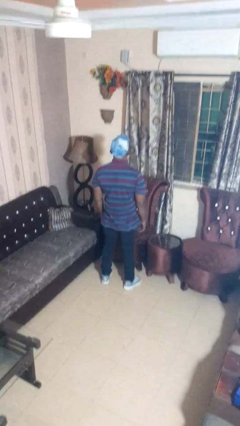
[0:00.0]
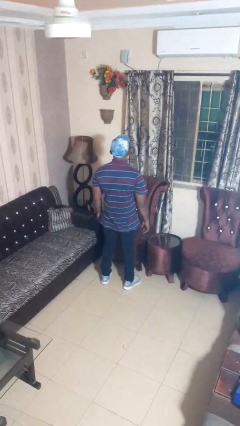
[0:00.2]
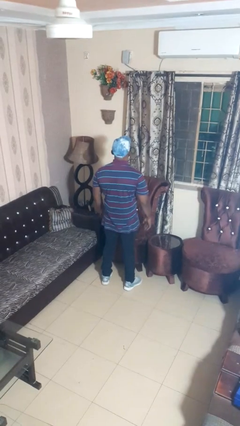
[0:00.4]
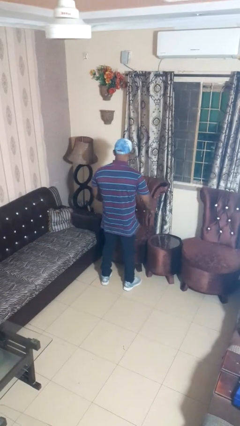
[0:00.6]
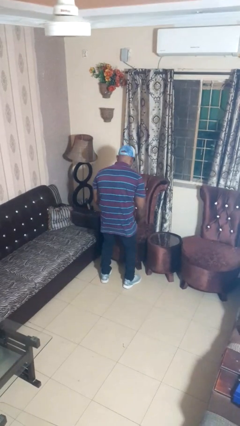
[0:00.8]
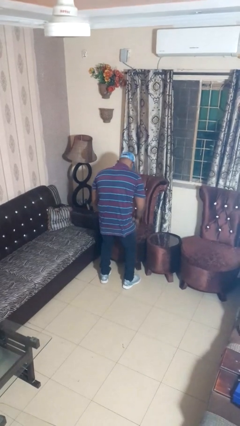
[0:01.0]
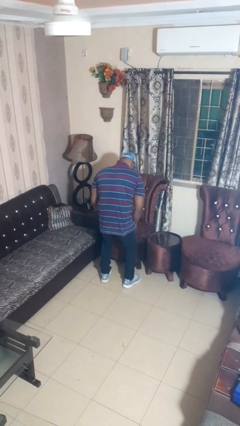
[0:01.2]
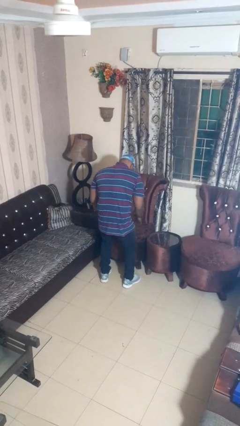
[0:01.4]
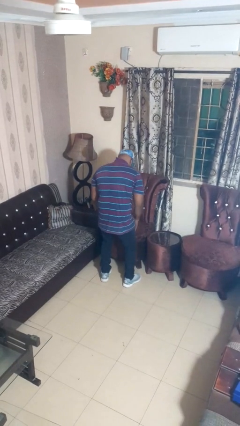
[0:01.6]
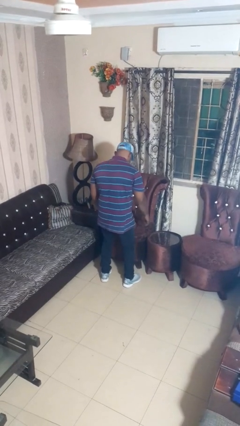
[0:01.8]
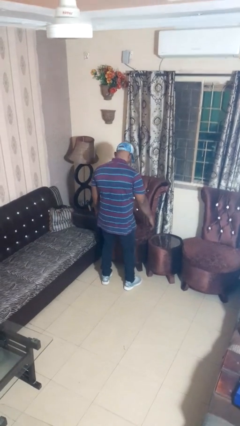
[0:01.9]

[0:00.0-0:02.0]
person slaps hands on thighs

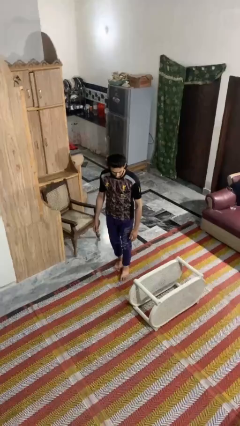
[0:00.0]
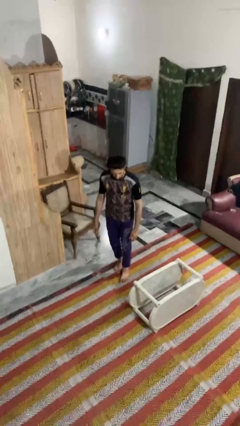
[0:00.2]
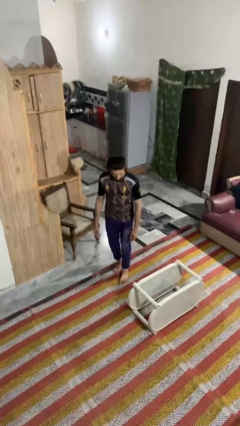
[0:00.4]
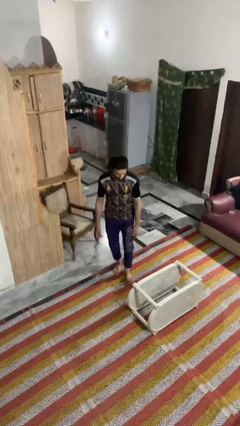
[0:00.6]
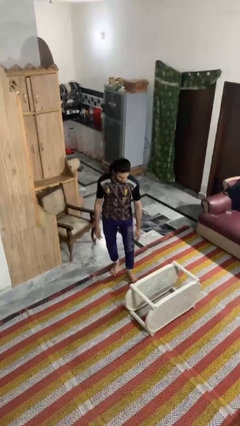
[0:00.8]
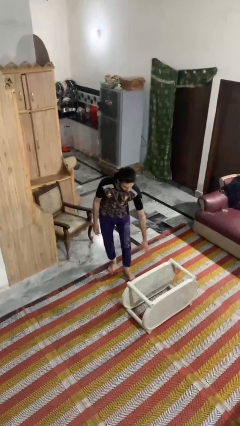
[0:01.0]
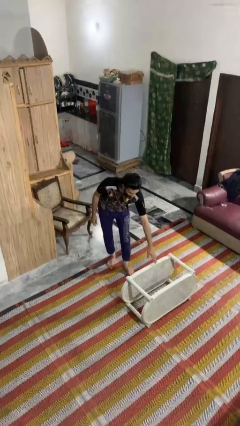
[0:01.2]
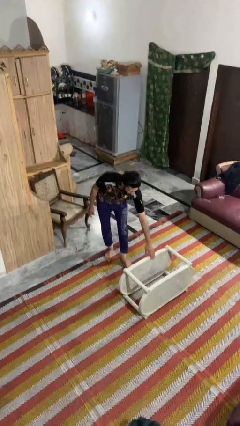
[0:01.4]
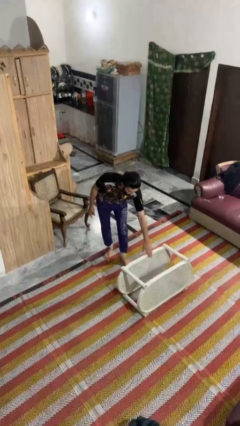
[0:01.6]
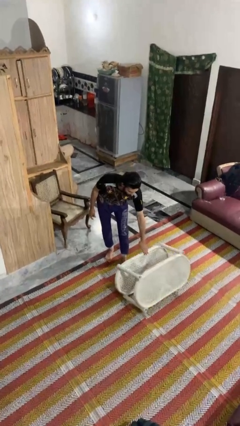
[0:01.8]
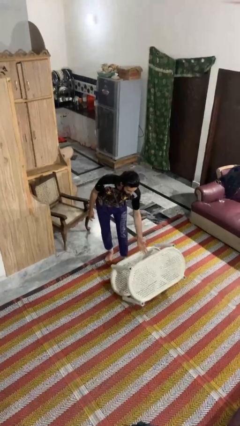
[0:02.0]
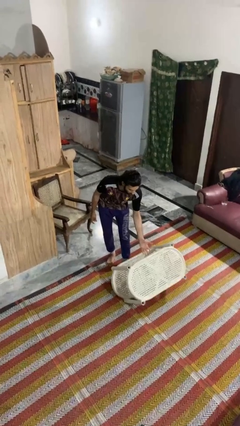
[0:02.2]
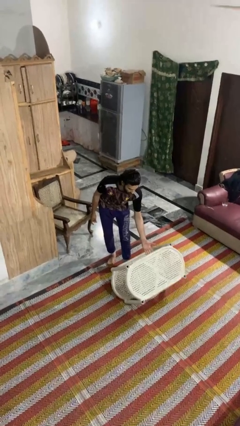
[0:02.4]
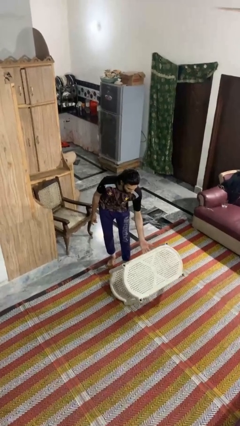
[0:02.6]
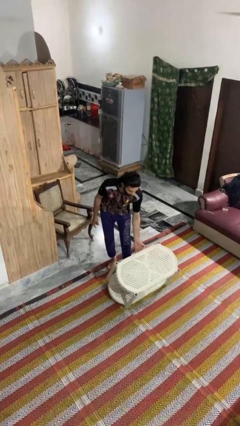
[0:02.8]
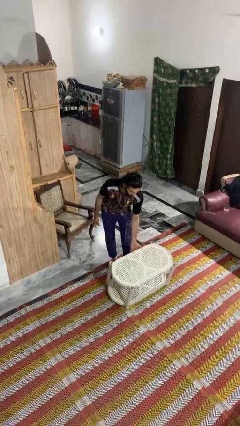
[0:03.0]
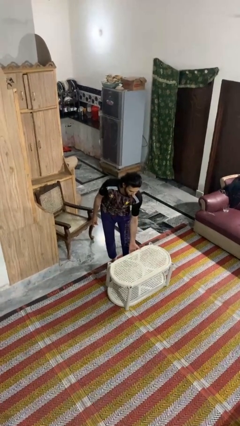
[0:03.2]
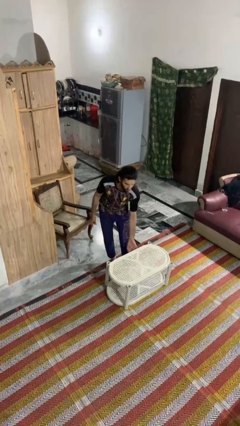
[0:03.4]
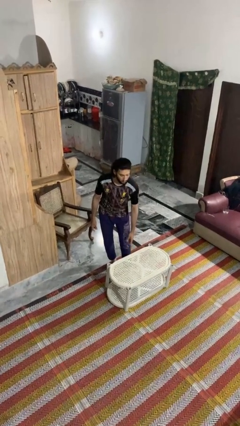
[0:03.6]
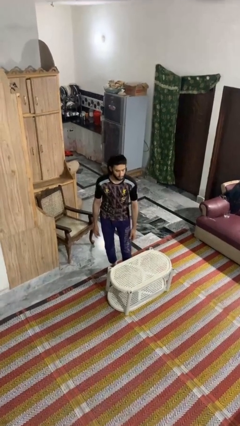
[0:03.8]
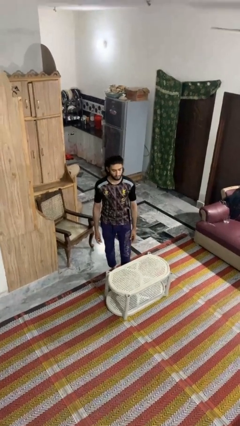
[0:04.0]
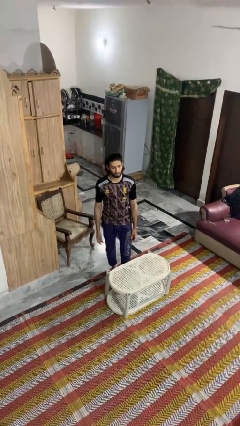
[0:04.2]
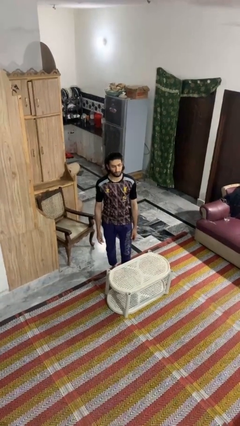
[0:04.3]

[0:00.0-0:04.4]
person sets upright furniture

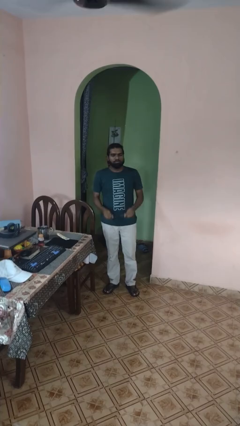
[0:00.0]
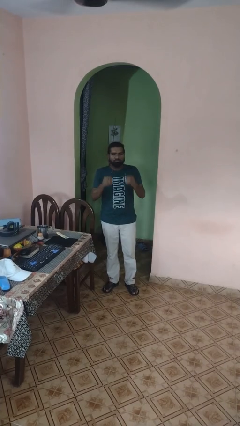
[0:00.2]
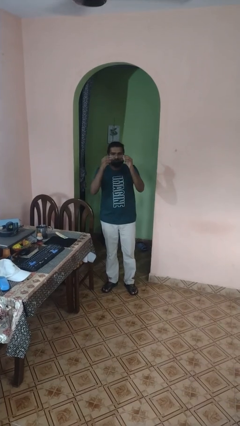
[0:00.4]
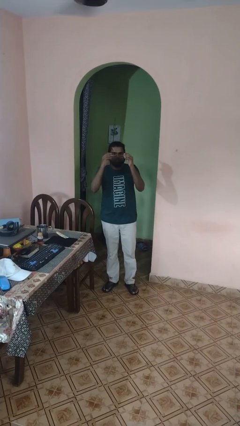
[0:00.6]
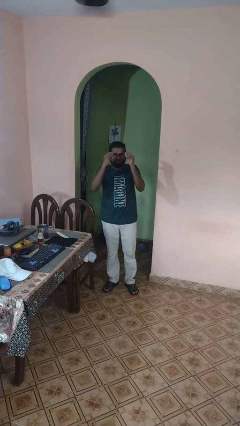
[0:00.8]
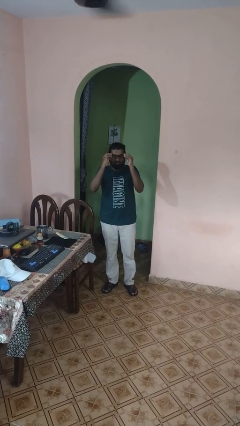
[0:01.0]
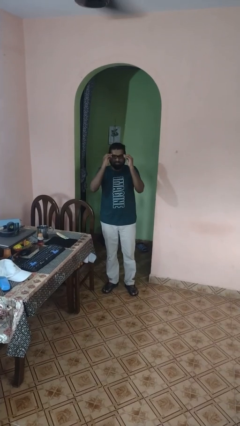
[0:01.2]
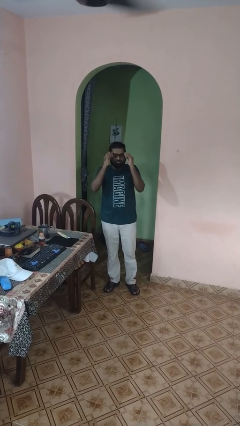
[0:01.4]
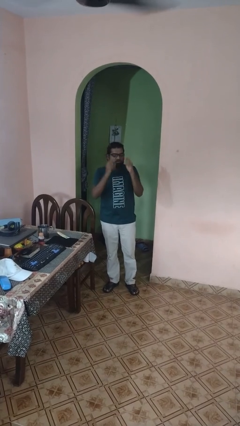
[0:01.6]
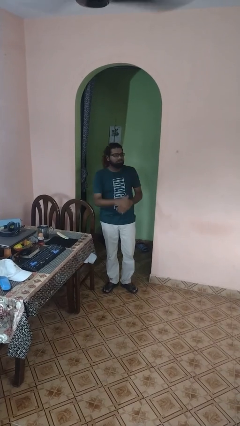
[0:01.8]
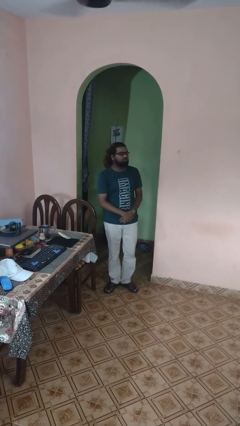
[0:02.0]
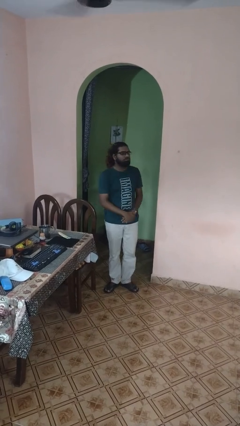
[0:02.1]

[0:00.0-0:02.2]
person puts on glasses

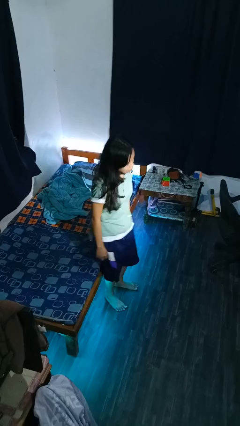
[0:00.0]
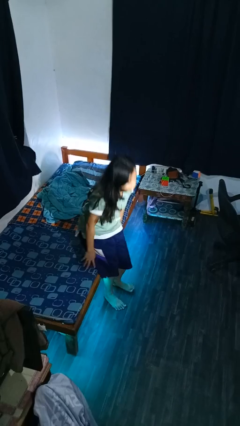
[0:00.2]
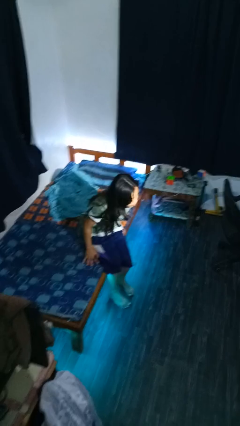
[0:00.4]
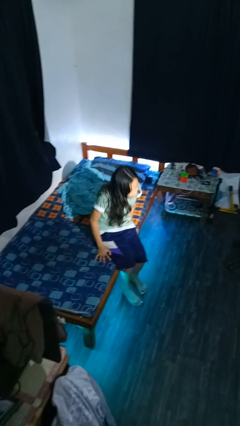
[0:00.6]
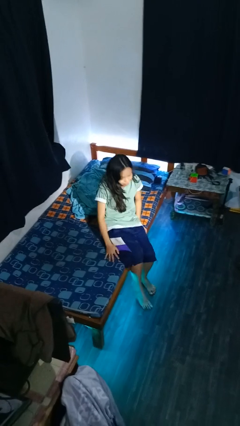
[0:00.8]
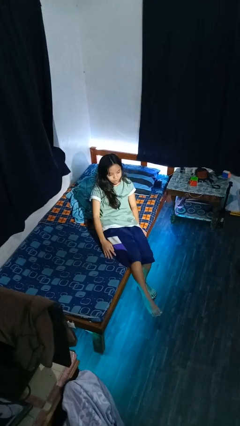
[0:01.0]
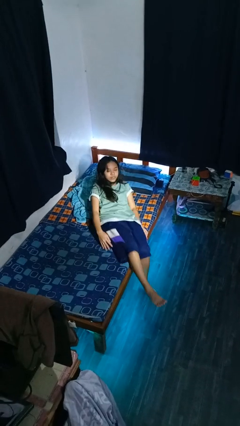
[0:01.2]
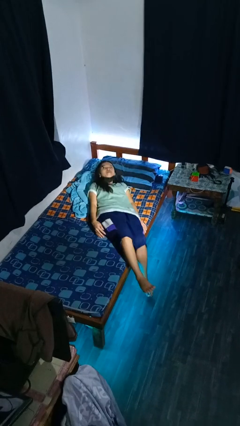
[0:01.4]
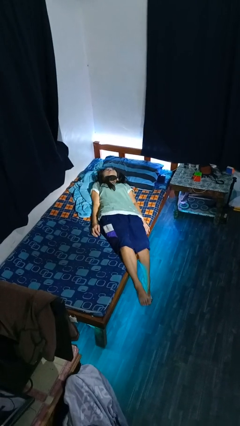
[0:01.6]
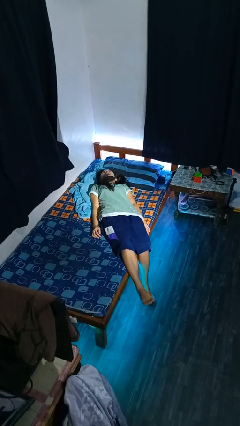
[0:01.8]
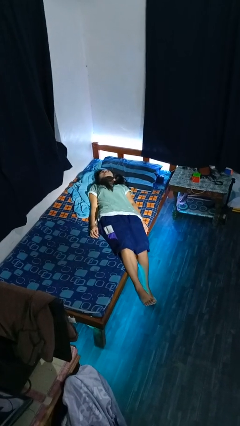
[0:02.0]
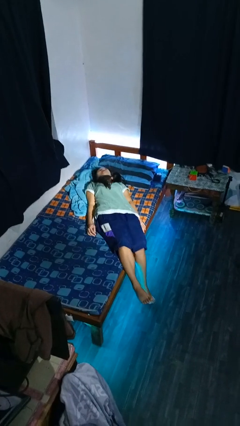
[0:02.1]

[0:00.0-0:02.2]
person lies down on bed

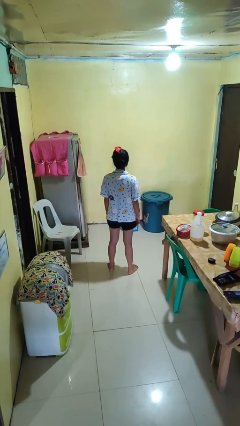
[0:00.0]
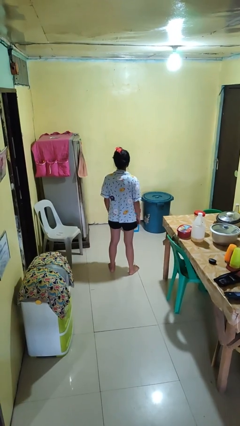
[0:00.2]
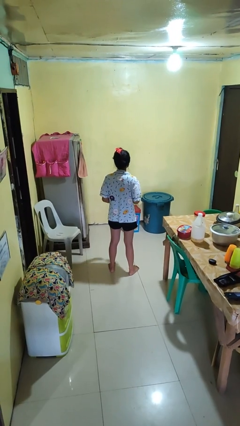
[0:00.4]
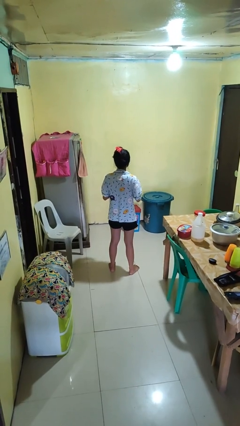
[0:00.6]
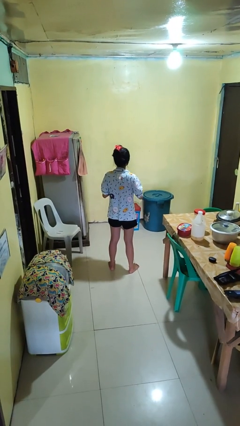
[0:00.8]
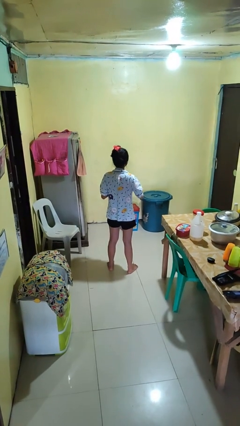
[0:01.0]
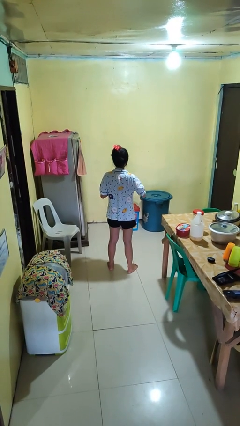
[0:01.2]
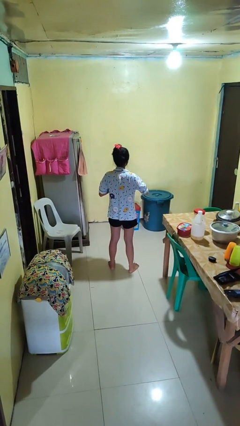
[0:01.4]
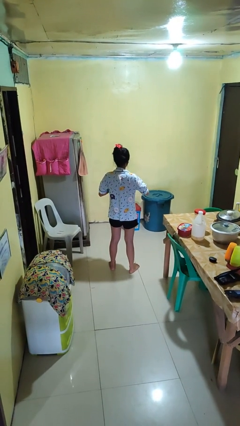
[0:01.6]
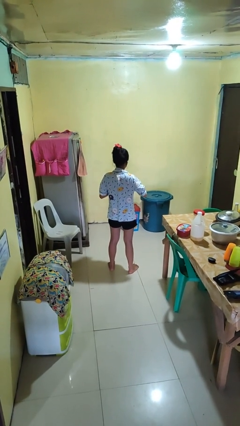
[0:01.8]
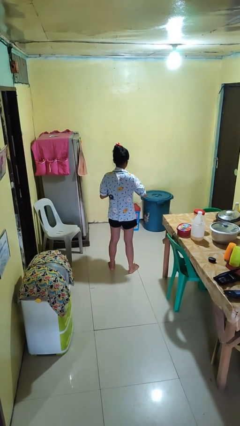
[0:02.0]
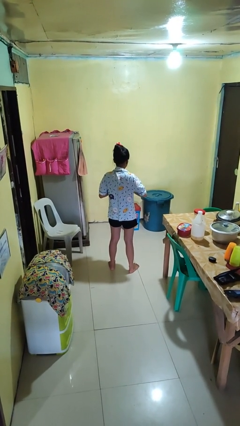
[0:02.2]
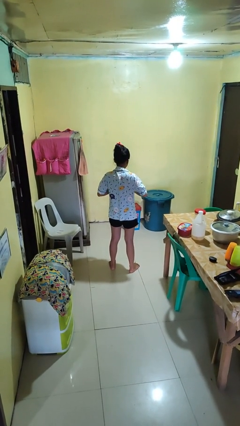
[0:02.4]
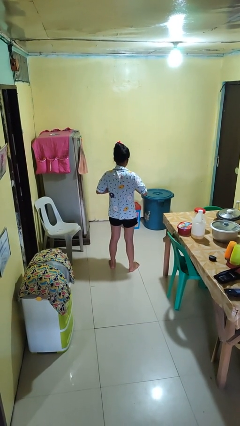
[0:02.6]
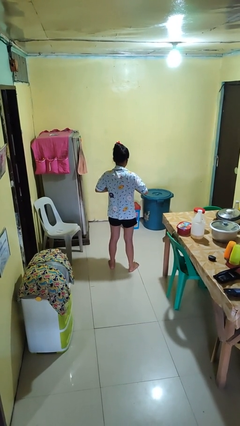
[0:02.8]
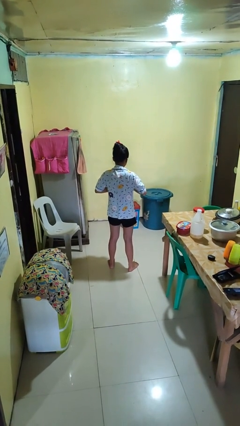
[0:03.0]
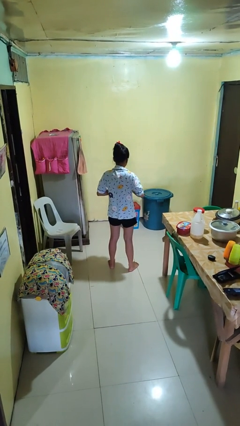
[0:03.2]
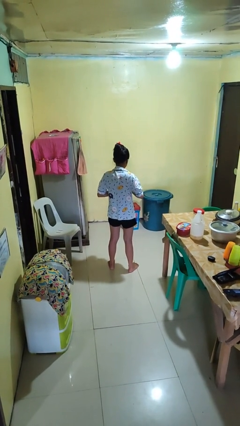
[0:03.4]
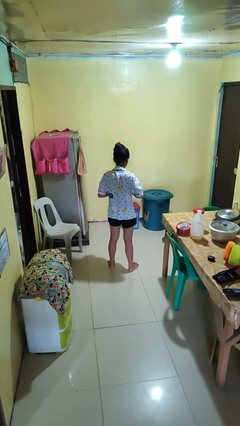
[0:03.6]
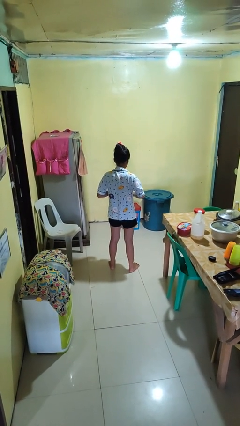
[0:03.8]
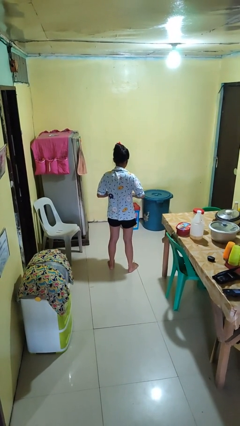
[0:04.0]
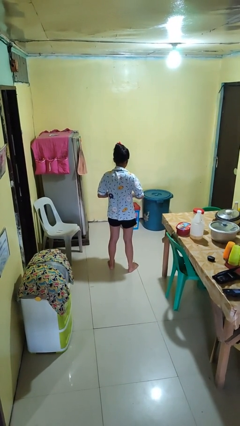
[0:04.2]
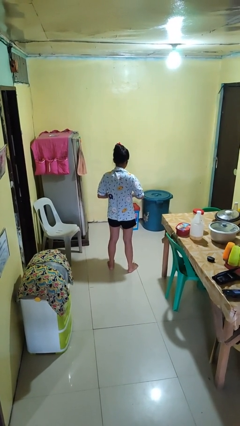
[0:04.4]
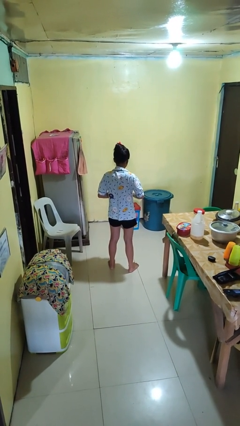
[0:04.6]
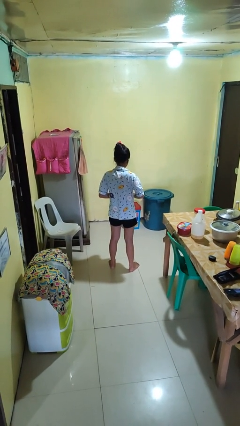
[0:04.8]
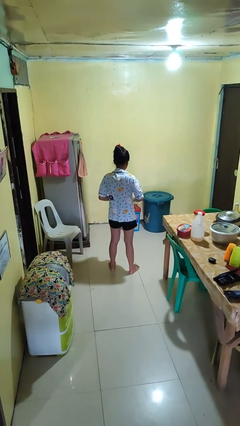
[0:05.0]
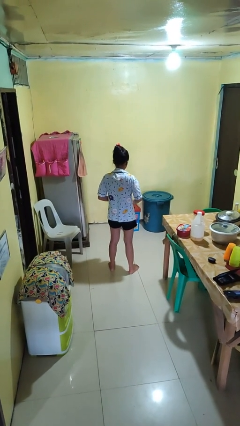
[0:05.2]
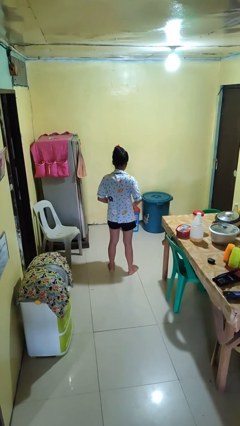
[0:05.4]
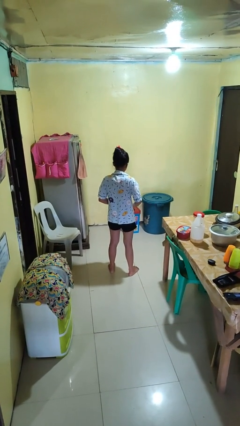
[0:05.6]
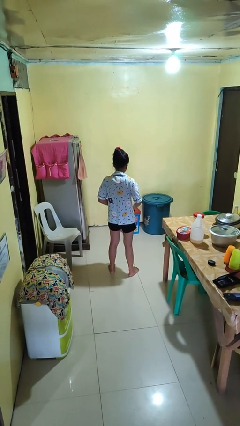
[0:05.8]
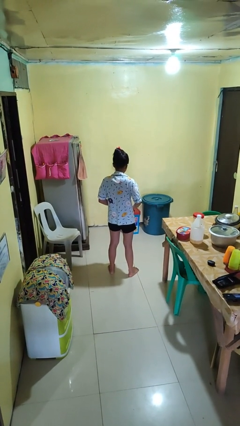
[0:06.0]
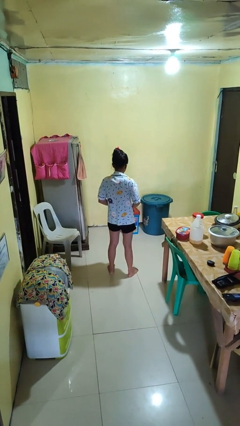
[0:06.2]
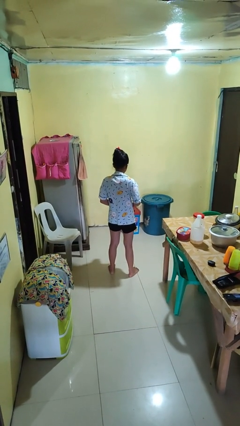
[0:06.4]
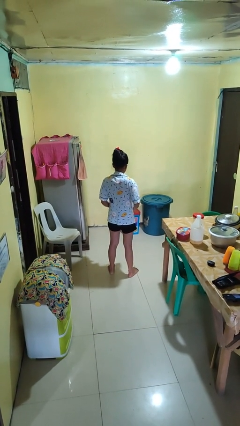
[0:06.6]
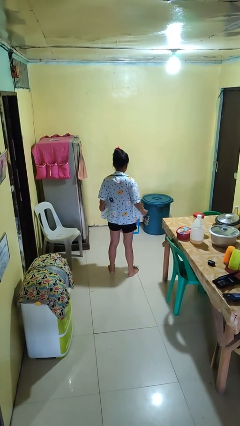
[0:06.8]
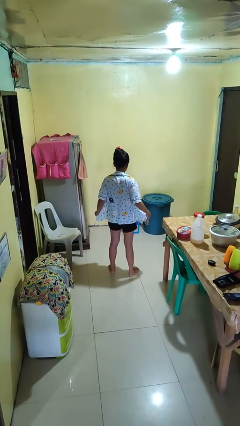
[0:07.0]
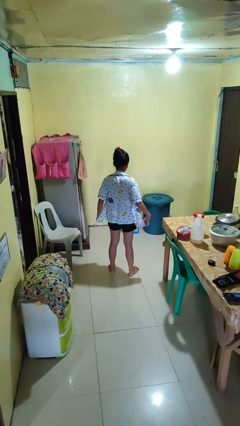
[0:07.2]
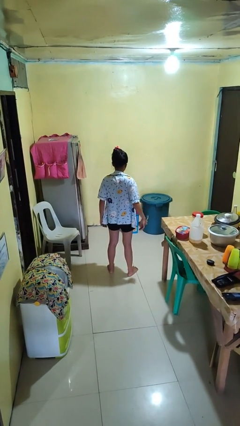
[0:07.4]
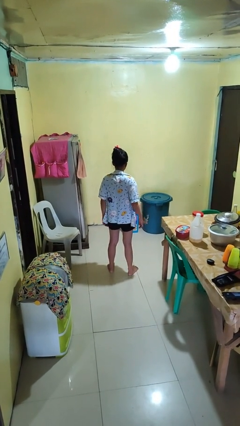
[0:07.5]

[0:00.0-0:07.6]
person unbuttons shirt
